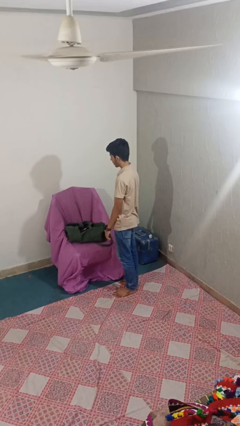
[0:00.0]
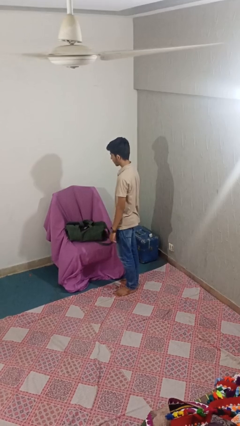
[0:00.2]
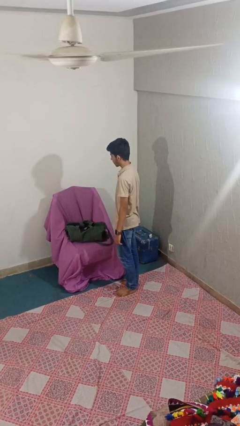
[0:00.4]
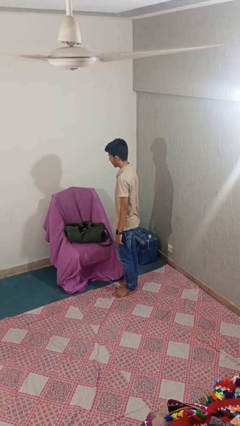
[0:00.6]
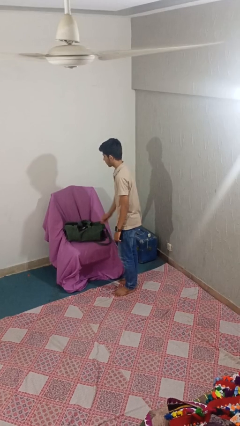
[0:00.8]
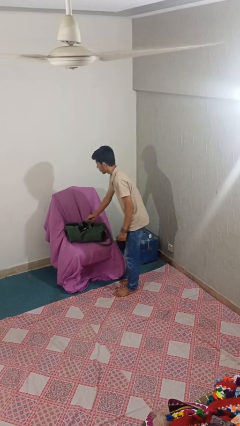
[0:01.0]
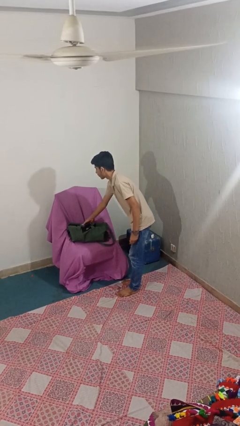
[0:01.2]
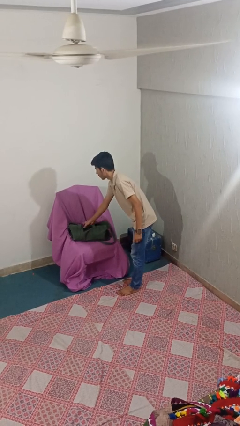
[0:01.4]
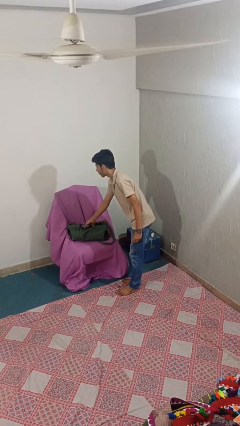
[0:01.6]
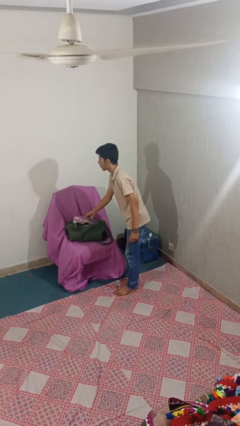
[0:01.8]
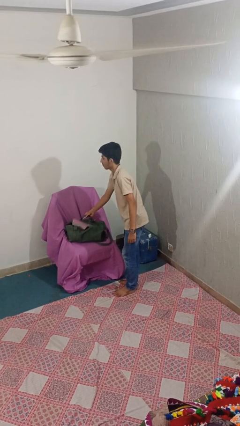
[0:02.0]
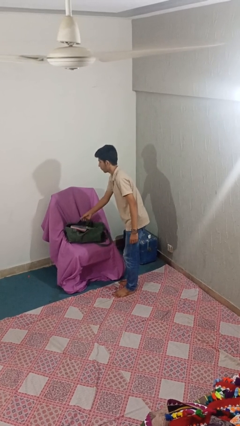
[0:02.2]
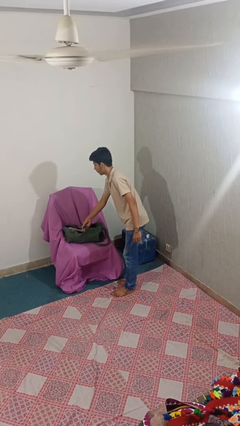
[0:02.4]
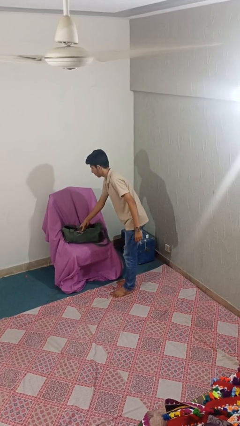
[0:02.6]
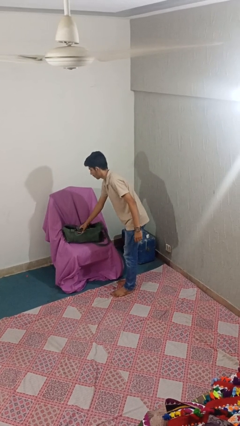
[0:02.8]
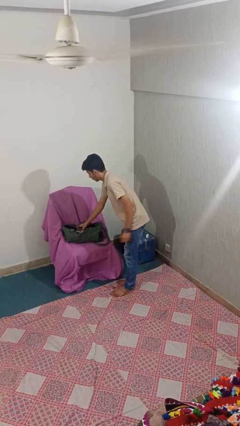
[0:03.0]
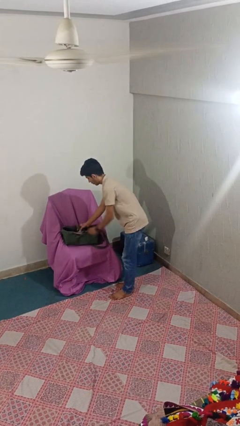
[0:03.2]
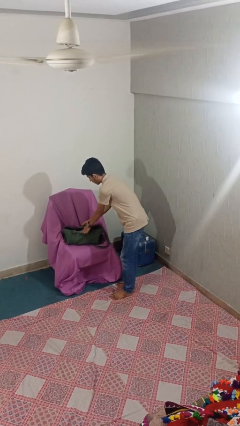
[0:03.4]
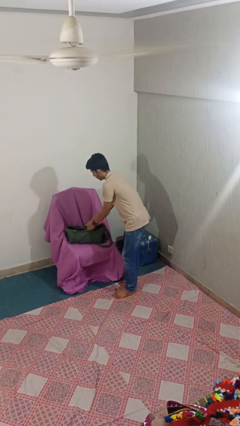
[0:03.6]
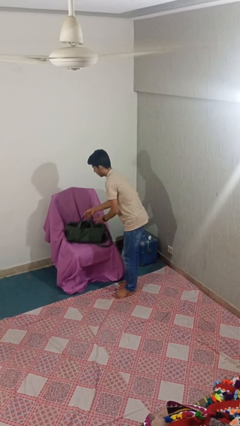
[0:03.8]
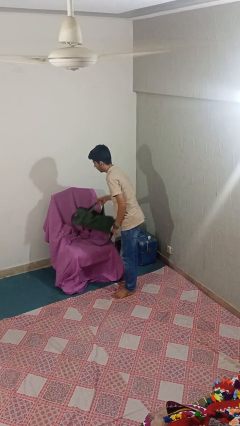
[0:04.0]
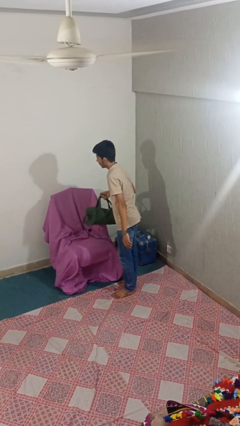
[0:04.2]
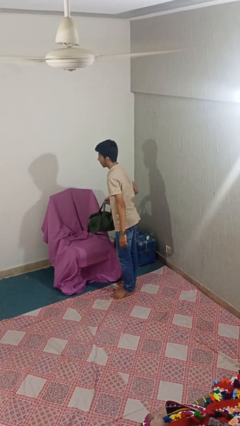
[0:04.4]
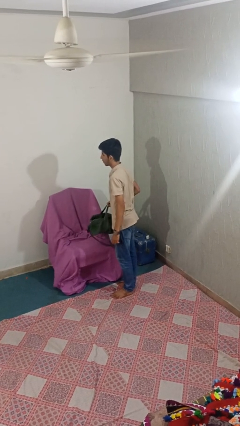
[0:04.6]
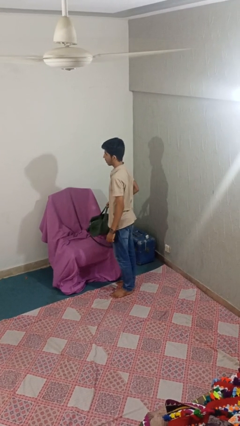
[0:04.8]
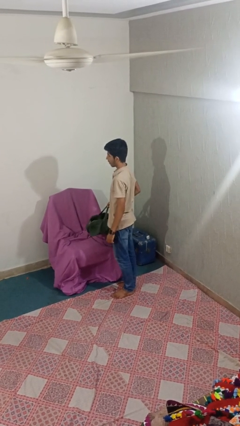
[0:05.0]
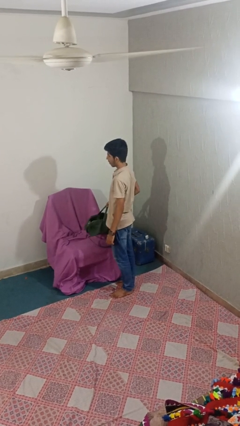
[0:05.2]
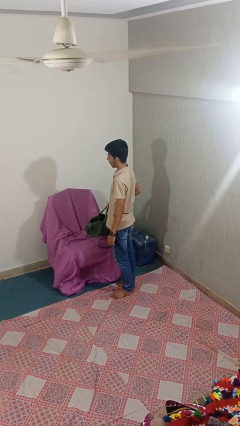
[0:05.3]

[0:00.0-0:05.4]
person picks up object from couch

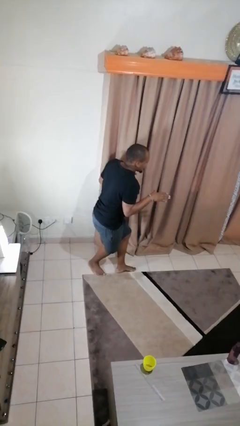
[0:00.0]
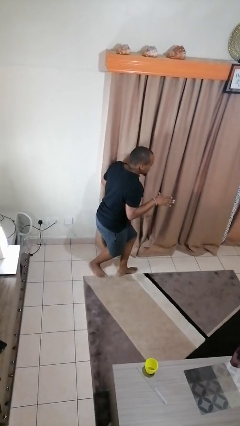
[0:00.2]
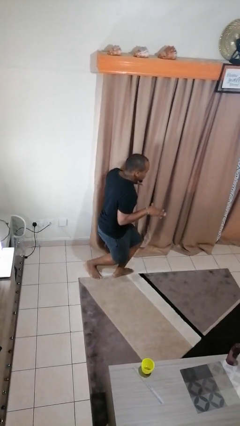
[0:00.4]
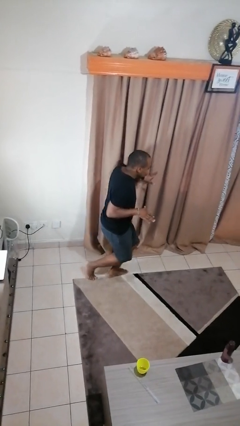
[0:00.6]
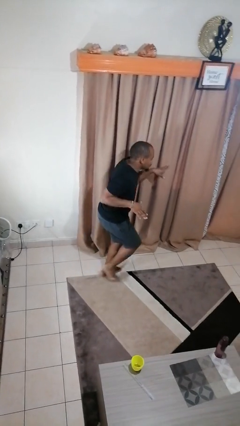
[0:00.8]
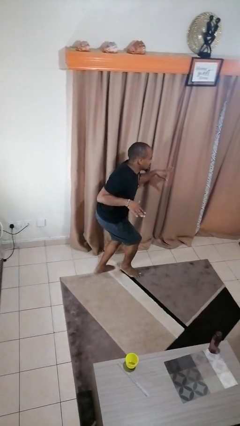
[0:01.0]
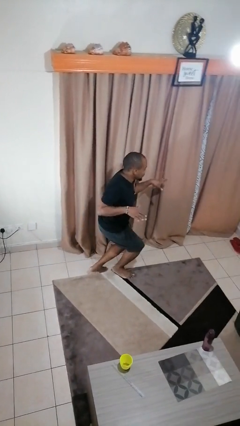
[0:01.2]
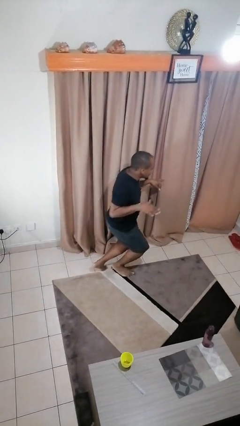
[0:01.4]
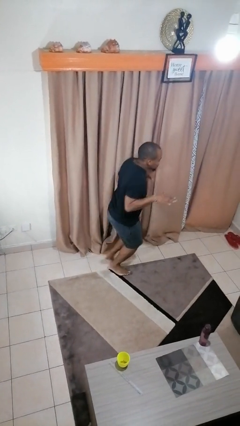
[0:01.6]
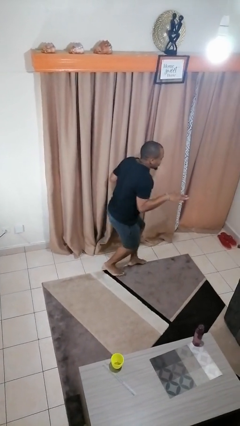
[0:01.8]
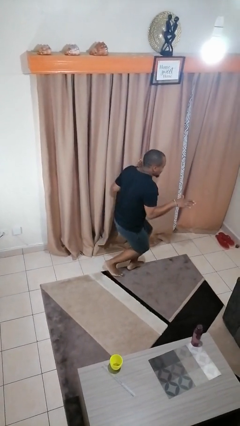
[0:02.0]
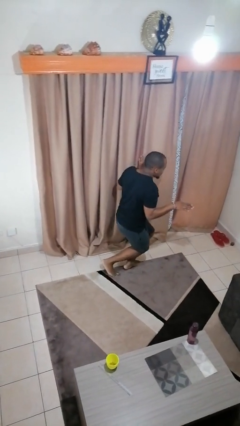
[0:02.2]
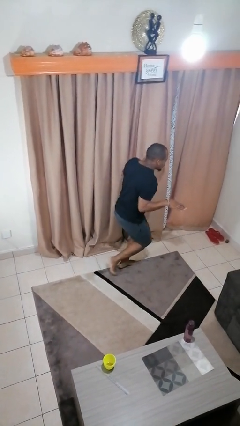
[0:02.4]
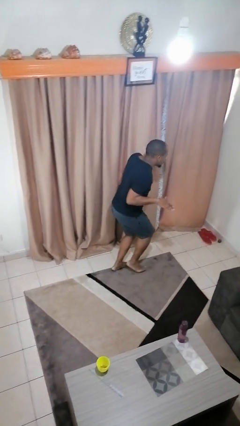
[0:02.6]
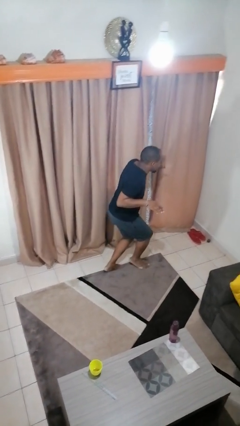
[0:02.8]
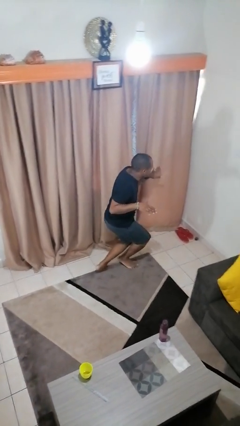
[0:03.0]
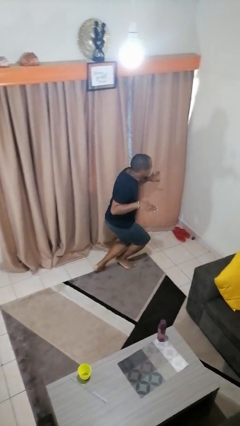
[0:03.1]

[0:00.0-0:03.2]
person throws object into air

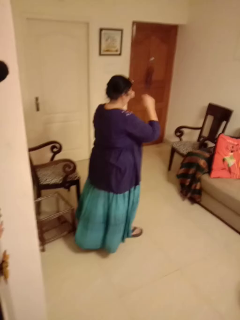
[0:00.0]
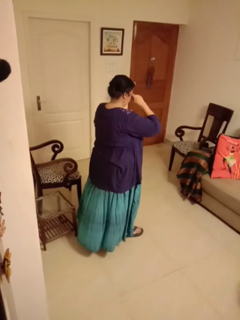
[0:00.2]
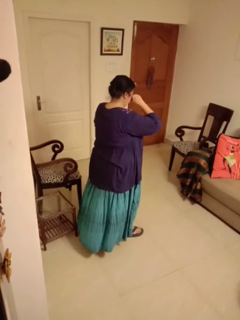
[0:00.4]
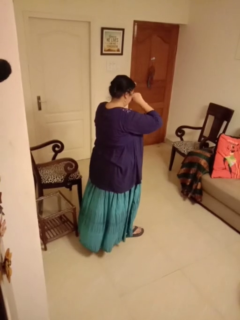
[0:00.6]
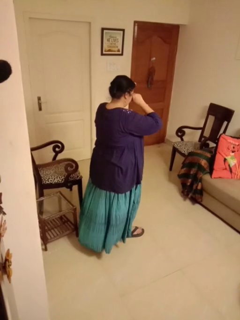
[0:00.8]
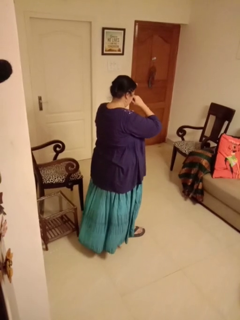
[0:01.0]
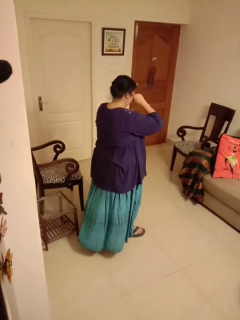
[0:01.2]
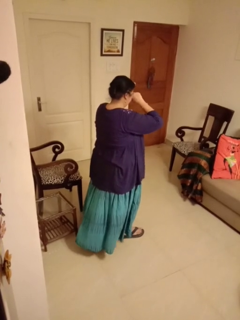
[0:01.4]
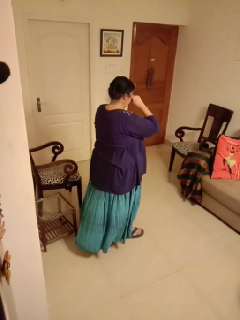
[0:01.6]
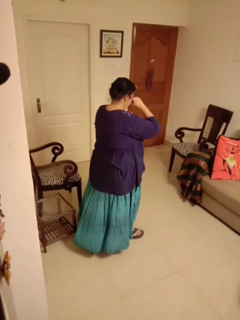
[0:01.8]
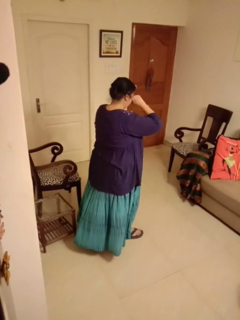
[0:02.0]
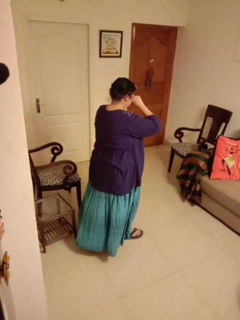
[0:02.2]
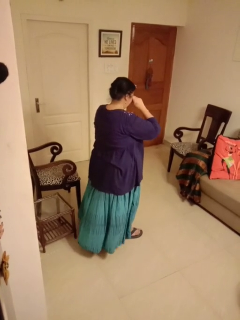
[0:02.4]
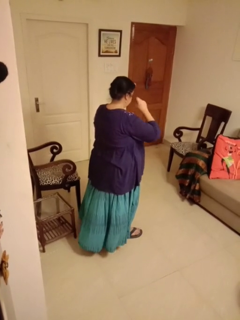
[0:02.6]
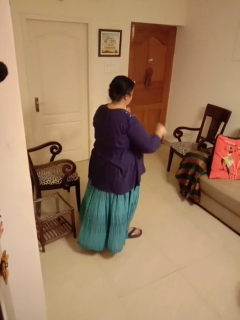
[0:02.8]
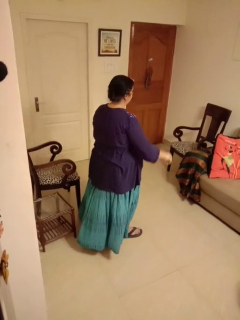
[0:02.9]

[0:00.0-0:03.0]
person rubs eyes

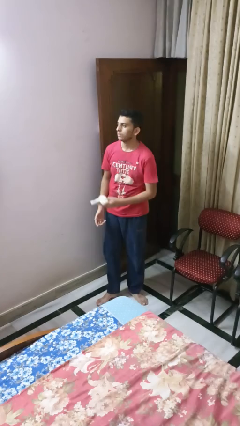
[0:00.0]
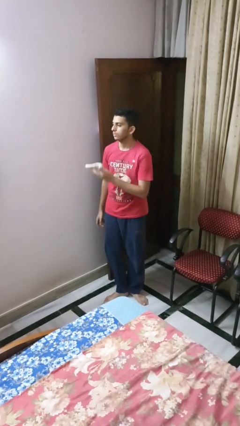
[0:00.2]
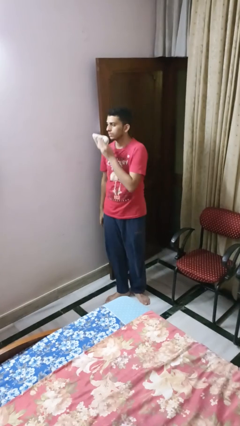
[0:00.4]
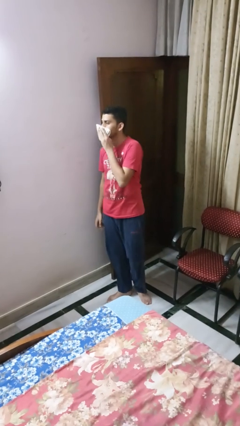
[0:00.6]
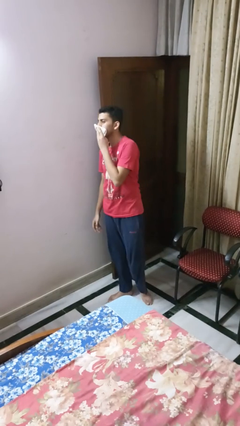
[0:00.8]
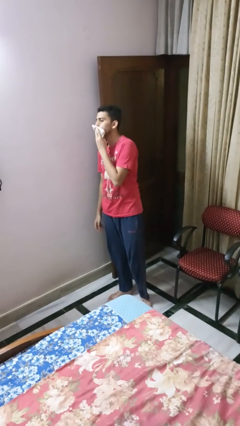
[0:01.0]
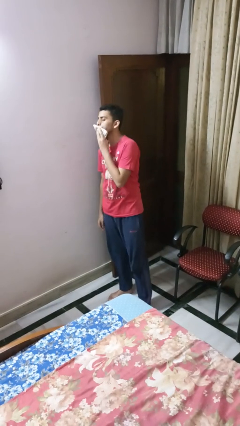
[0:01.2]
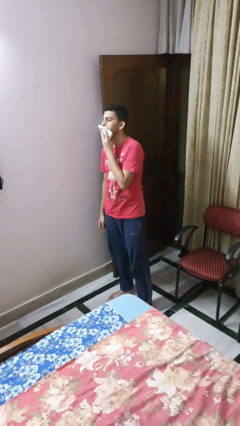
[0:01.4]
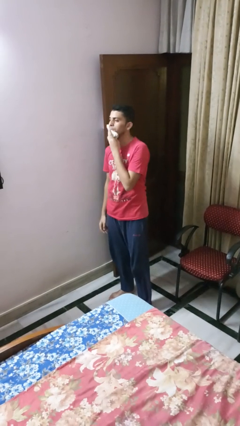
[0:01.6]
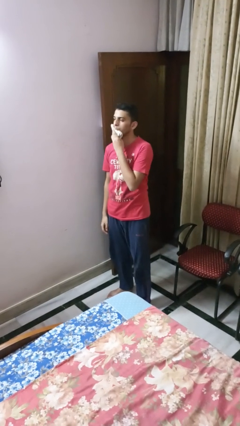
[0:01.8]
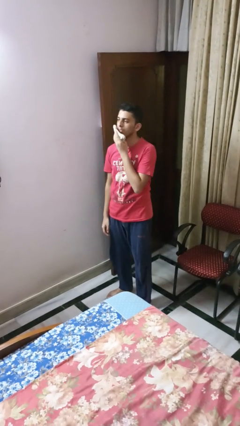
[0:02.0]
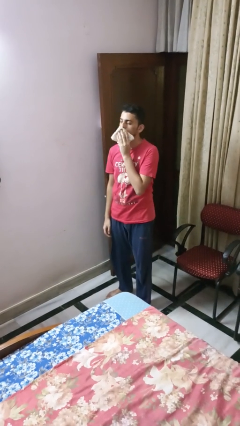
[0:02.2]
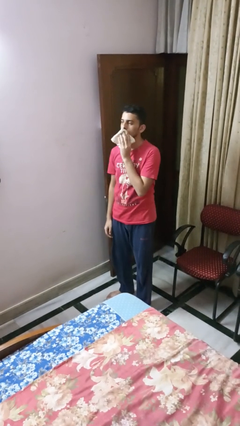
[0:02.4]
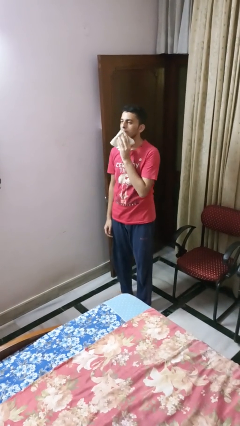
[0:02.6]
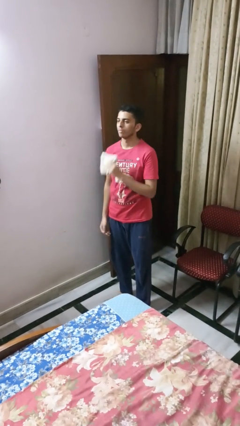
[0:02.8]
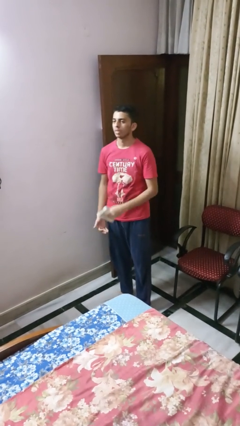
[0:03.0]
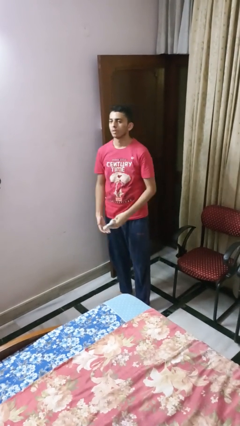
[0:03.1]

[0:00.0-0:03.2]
person wipes mouth with napkin

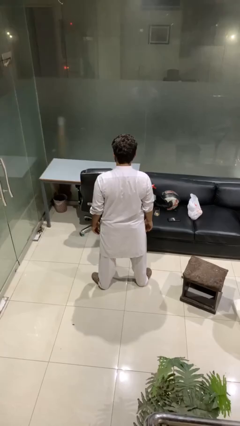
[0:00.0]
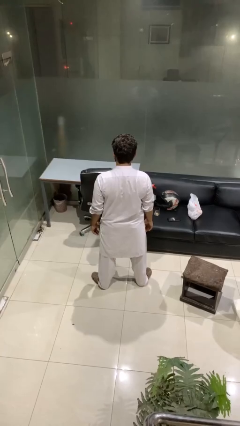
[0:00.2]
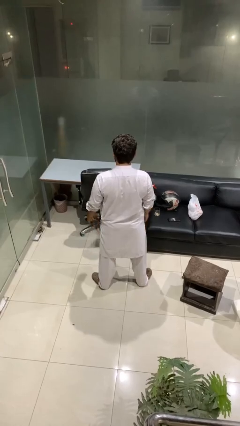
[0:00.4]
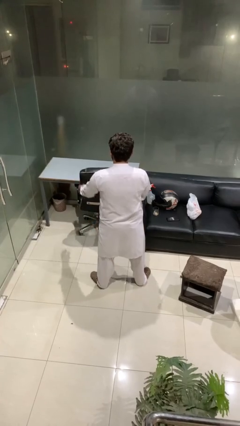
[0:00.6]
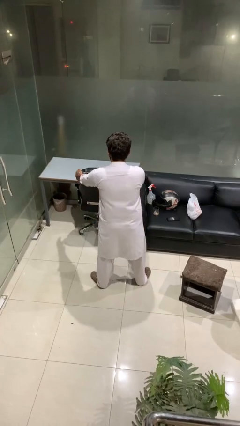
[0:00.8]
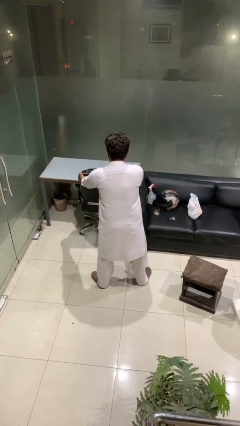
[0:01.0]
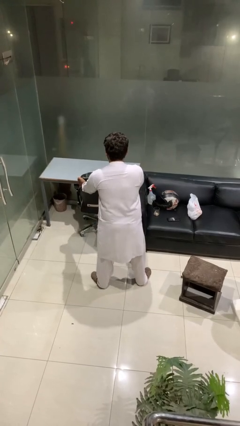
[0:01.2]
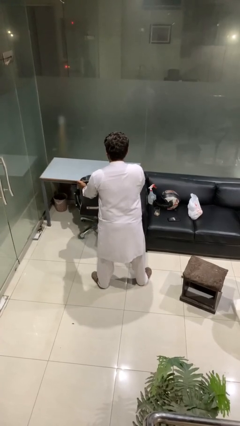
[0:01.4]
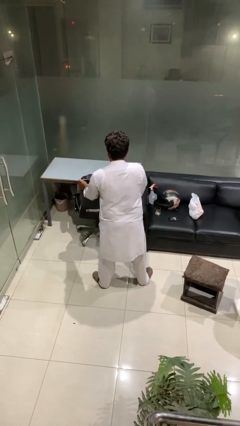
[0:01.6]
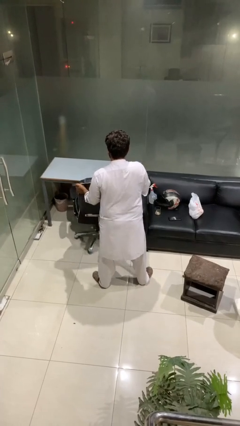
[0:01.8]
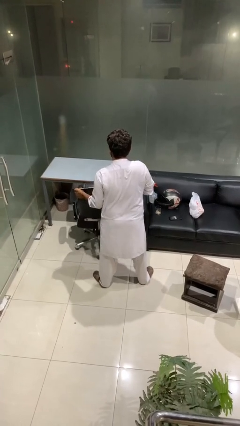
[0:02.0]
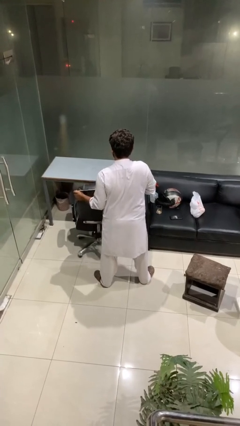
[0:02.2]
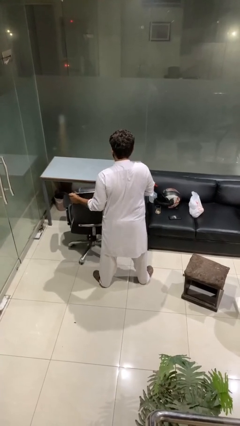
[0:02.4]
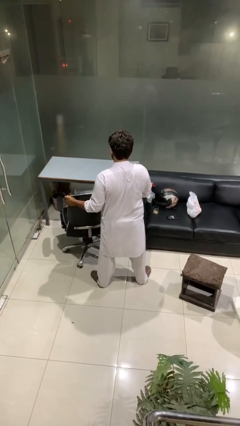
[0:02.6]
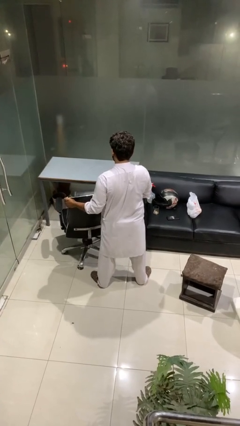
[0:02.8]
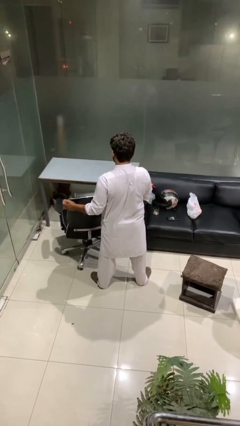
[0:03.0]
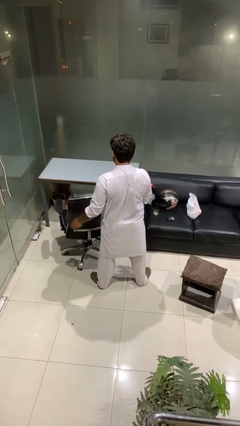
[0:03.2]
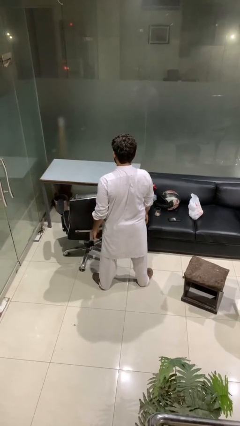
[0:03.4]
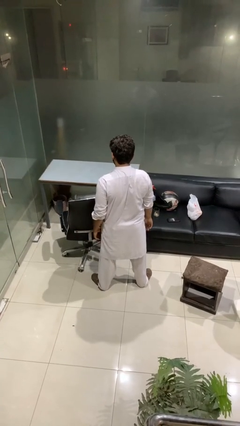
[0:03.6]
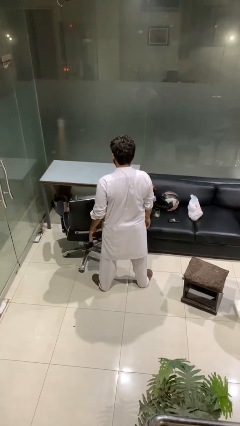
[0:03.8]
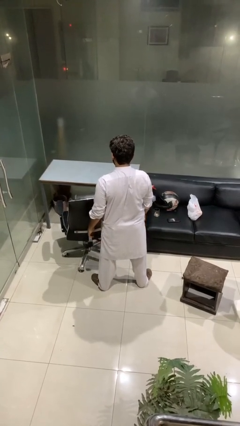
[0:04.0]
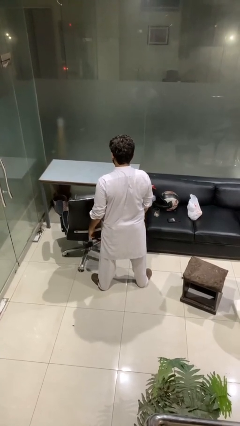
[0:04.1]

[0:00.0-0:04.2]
person pulls out chair
